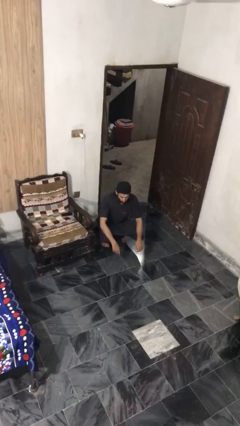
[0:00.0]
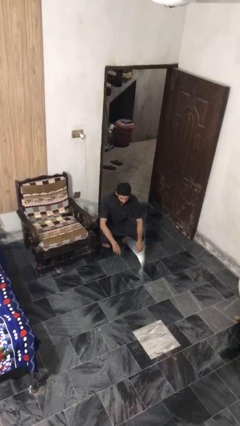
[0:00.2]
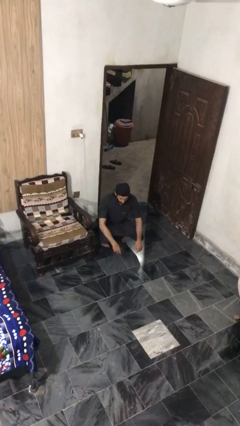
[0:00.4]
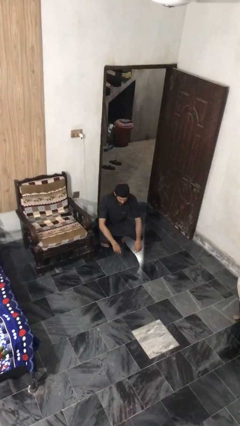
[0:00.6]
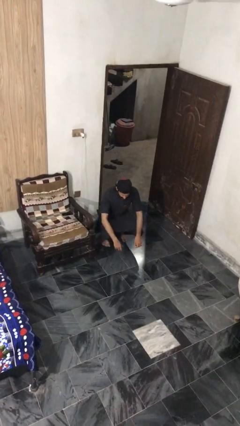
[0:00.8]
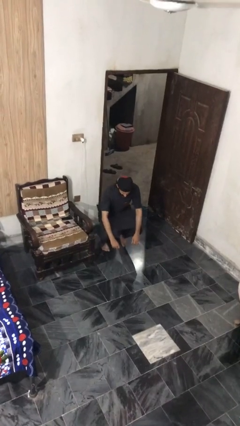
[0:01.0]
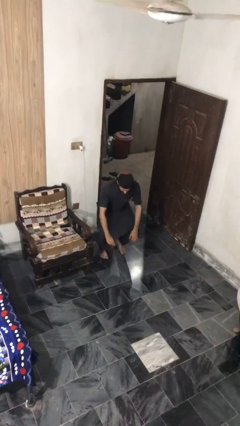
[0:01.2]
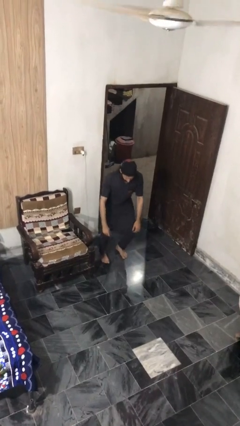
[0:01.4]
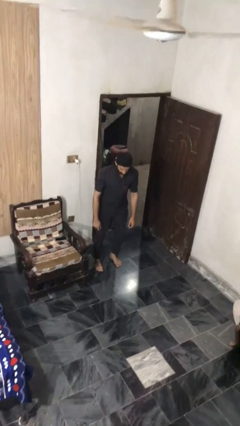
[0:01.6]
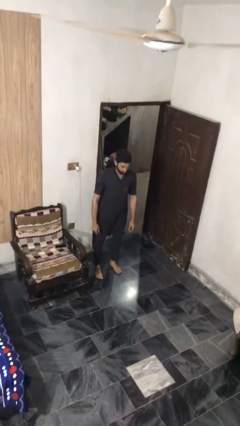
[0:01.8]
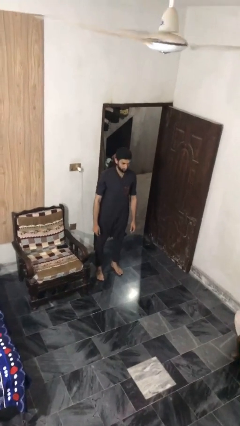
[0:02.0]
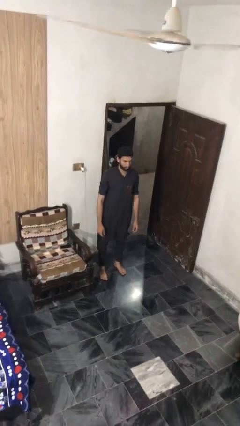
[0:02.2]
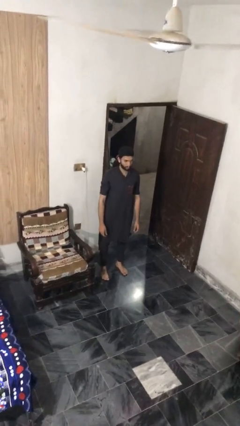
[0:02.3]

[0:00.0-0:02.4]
person stands up

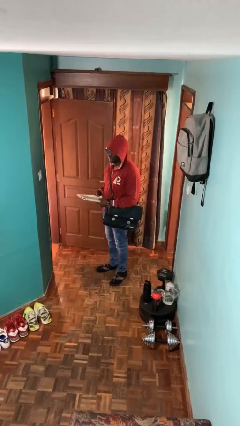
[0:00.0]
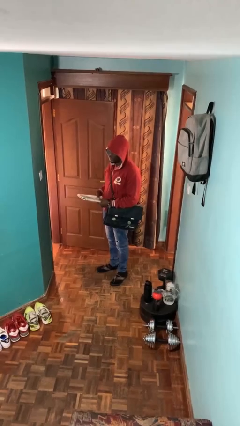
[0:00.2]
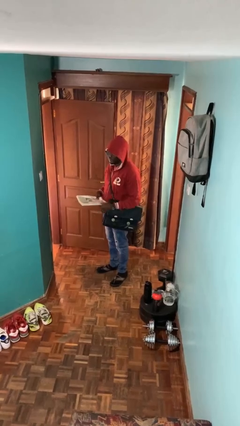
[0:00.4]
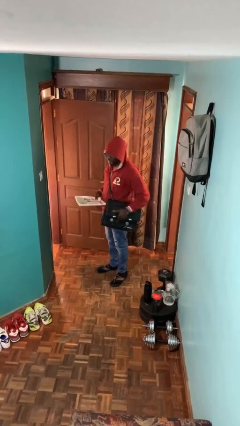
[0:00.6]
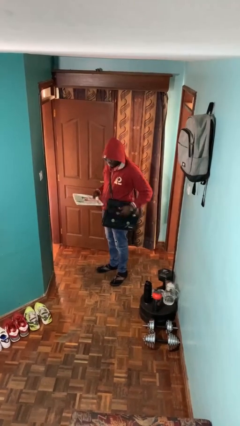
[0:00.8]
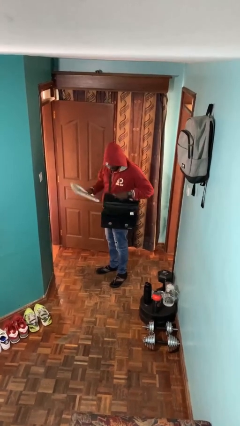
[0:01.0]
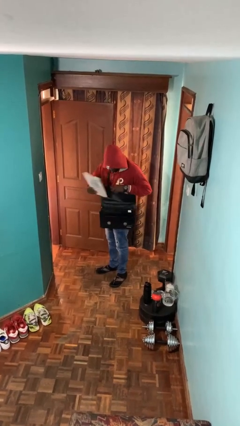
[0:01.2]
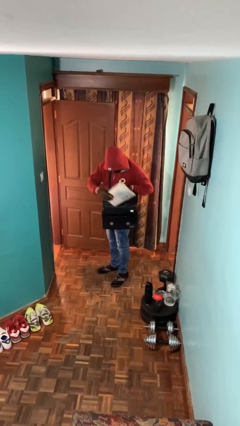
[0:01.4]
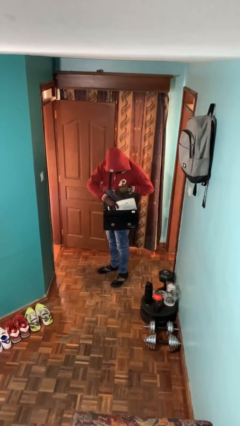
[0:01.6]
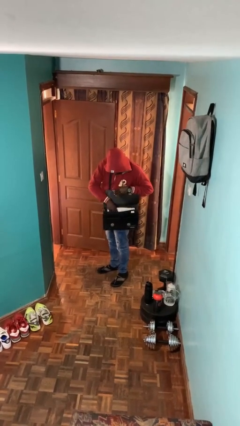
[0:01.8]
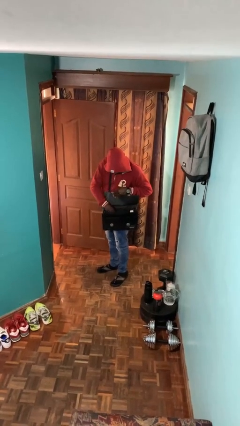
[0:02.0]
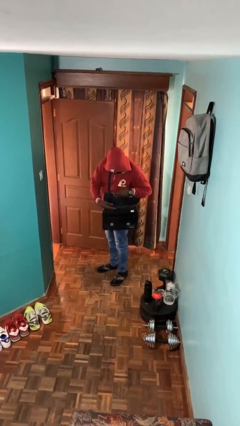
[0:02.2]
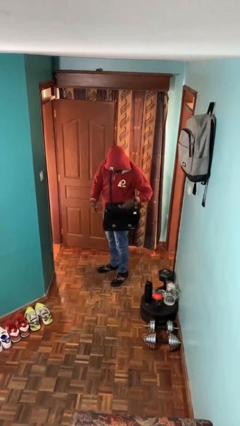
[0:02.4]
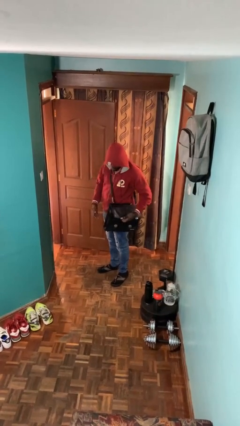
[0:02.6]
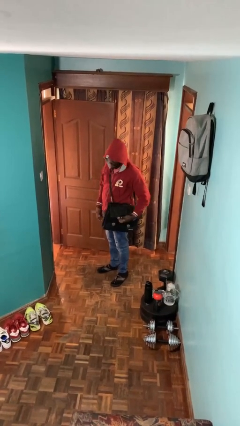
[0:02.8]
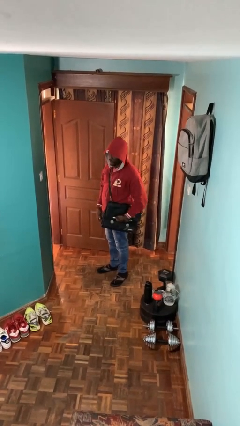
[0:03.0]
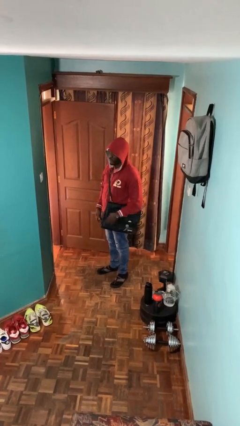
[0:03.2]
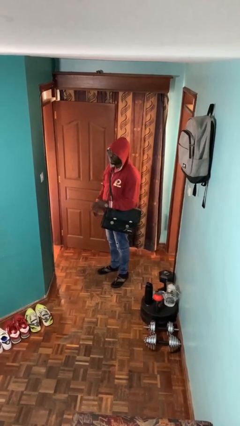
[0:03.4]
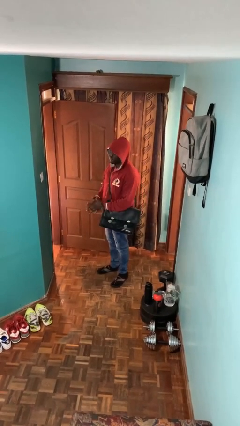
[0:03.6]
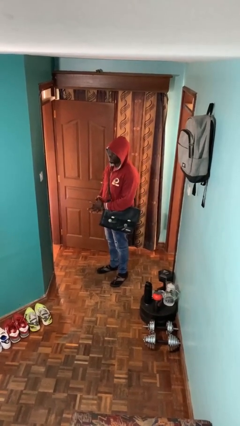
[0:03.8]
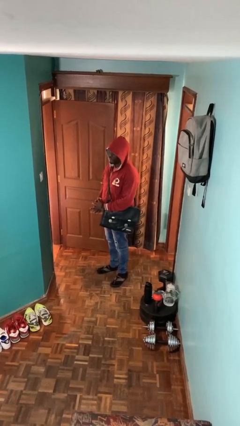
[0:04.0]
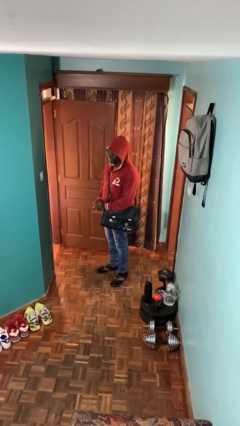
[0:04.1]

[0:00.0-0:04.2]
person puts object into purse

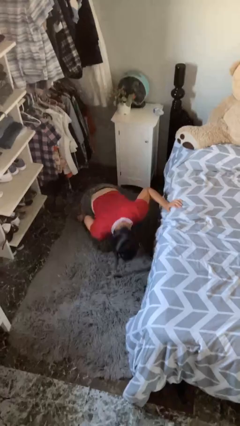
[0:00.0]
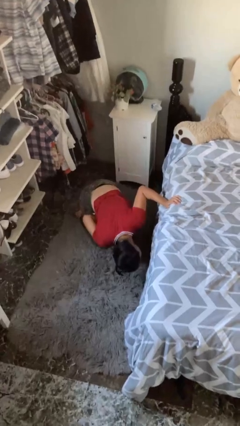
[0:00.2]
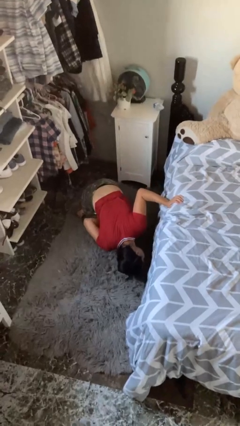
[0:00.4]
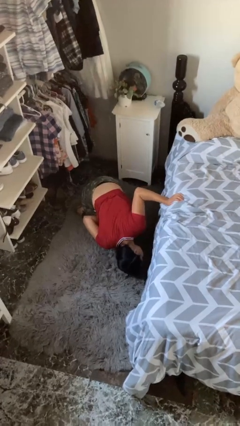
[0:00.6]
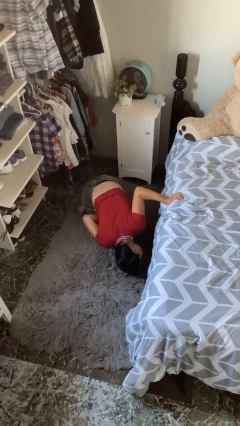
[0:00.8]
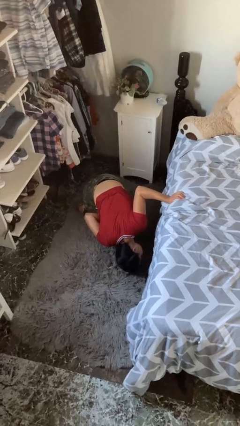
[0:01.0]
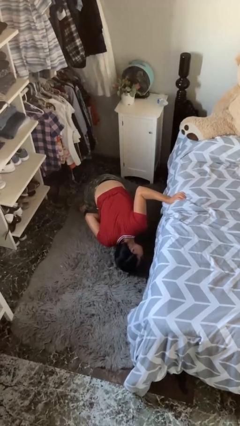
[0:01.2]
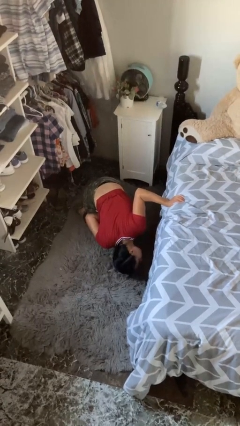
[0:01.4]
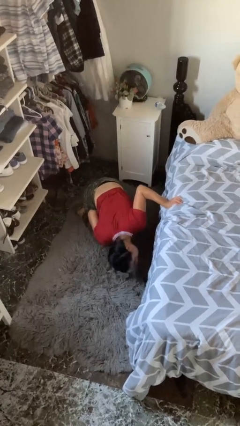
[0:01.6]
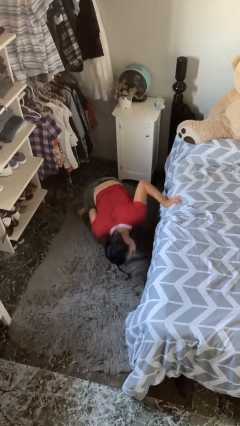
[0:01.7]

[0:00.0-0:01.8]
person searches under bed

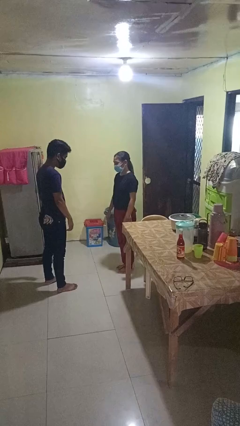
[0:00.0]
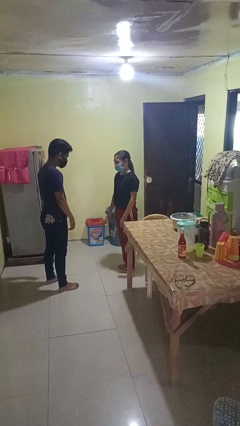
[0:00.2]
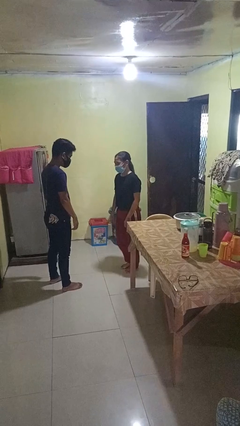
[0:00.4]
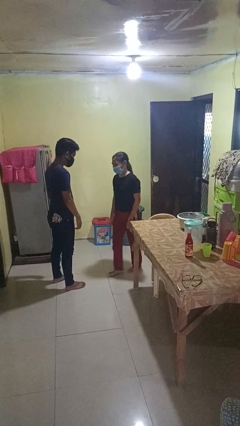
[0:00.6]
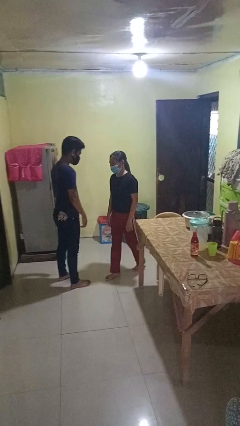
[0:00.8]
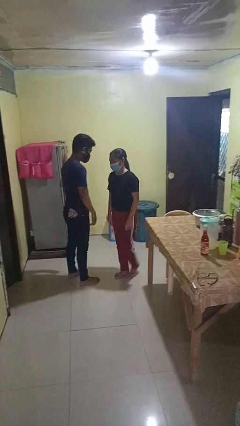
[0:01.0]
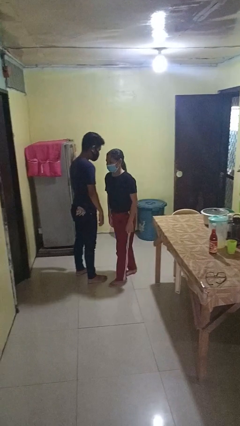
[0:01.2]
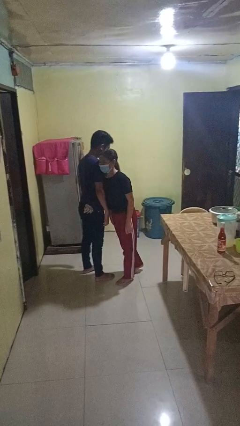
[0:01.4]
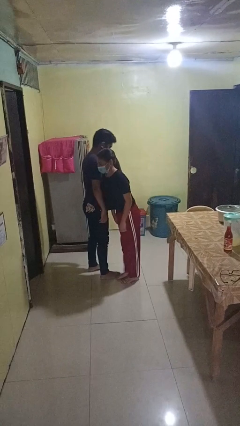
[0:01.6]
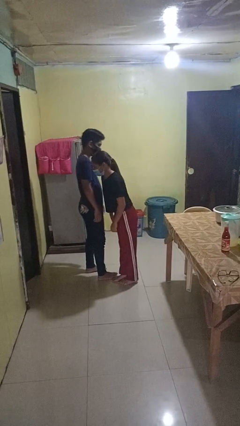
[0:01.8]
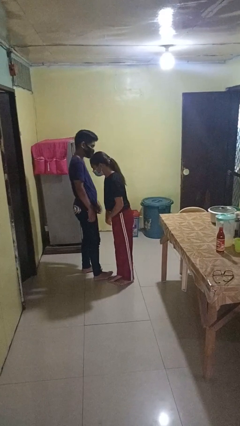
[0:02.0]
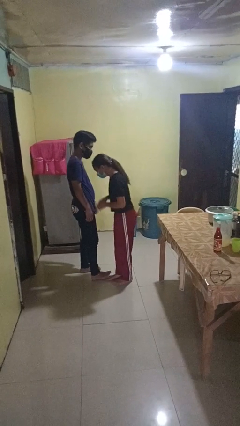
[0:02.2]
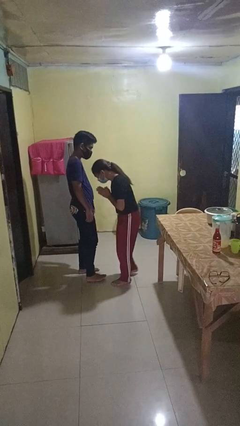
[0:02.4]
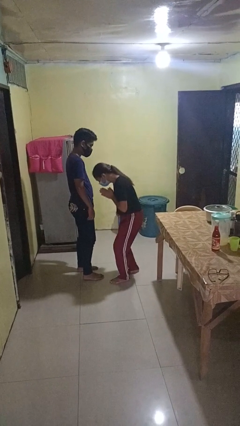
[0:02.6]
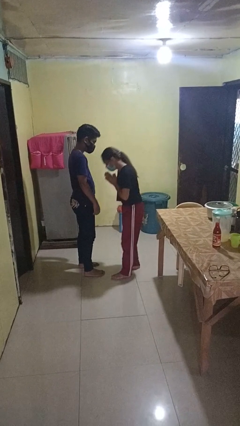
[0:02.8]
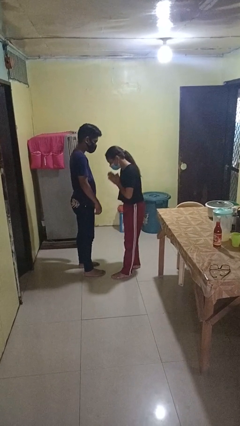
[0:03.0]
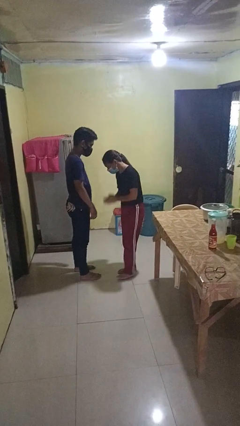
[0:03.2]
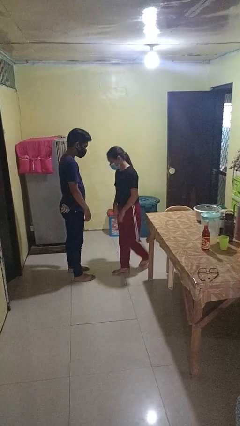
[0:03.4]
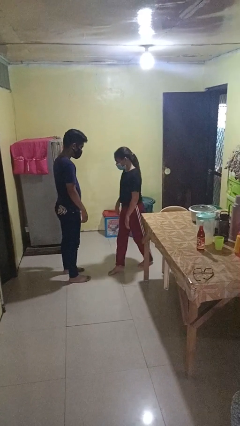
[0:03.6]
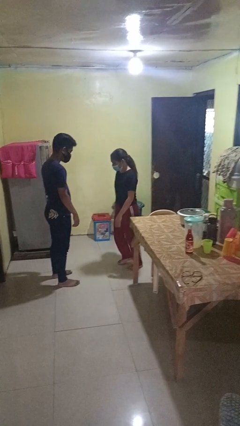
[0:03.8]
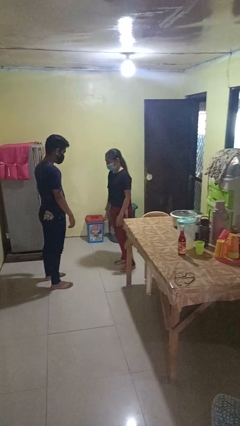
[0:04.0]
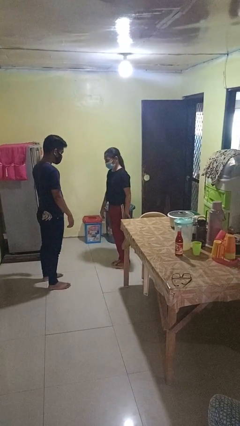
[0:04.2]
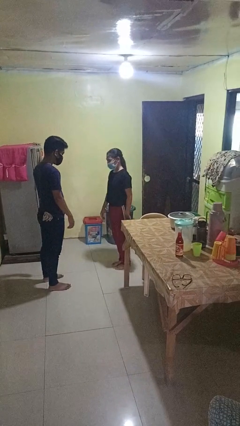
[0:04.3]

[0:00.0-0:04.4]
person bumps into person

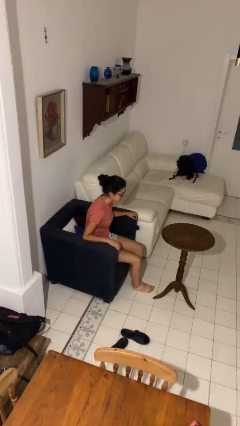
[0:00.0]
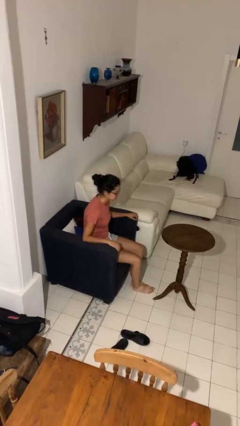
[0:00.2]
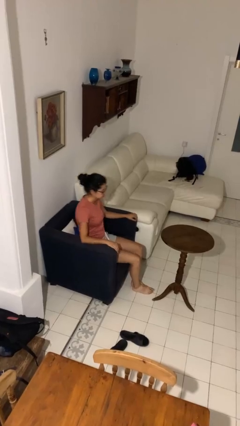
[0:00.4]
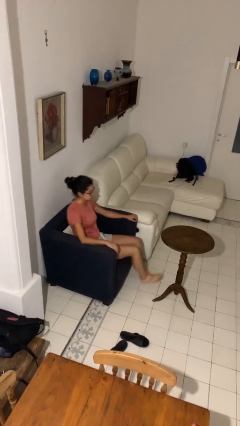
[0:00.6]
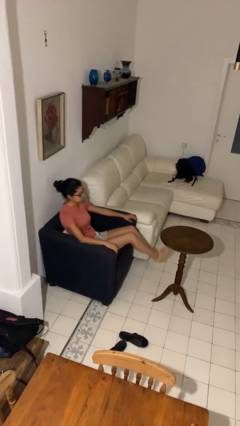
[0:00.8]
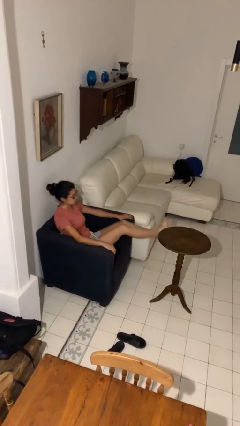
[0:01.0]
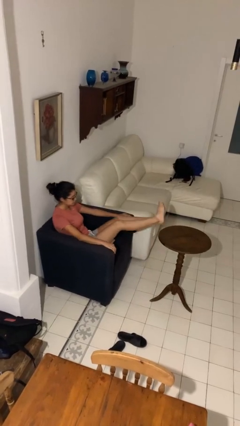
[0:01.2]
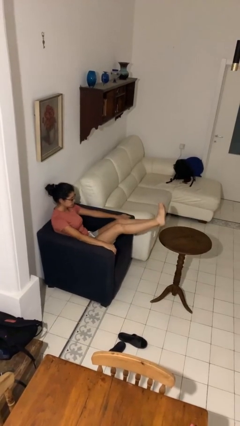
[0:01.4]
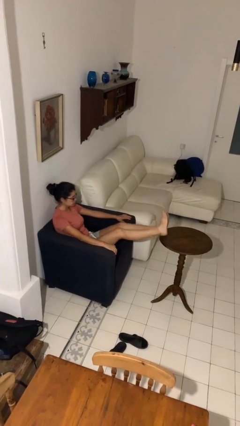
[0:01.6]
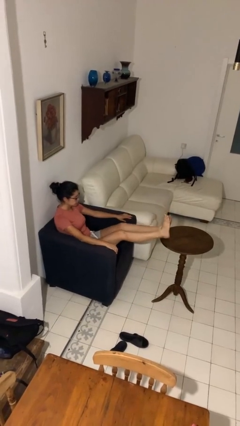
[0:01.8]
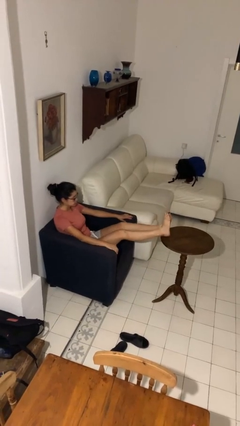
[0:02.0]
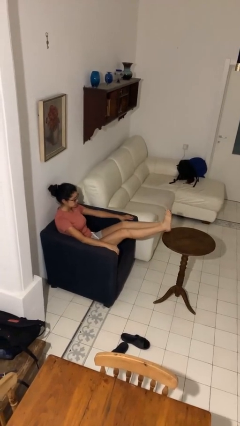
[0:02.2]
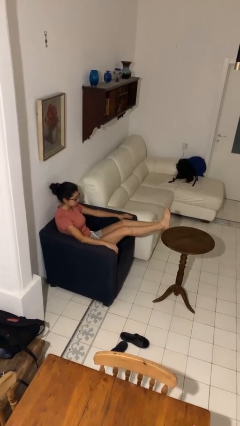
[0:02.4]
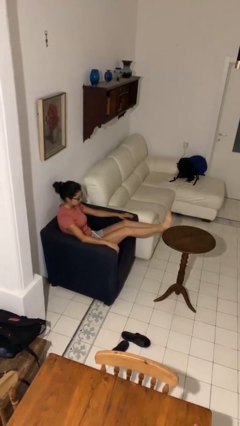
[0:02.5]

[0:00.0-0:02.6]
person puts feet up

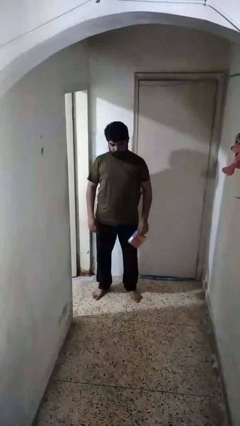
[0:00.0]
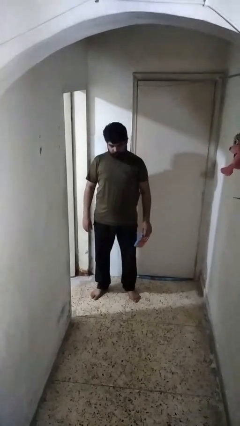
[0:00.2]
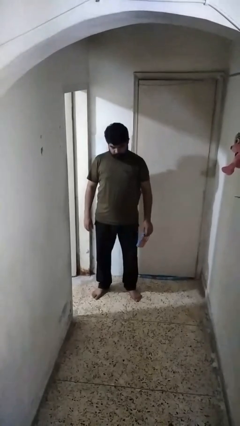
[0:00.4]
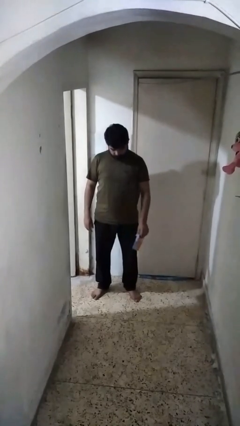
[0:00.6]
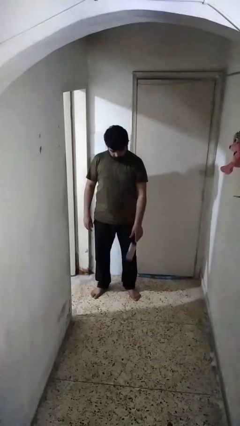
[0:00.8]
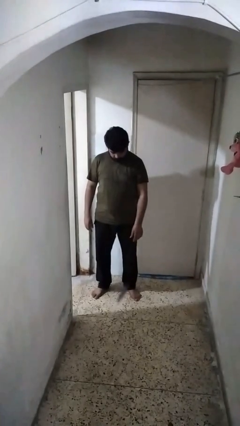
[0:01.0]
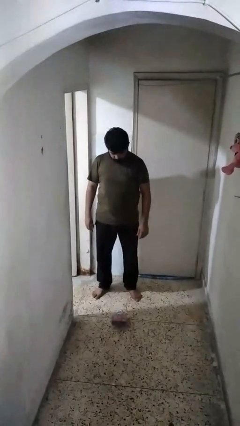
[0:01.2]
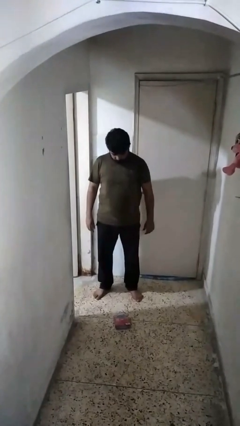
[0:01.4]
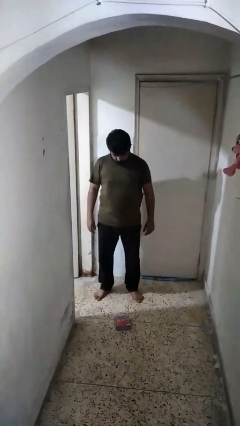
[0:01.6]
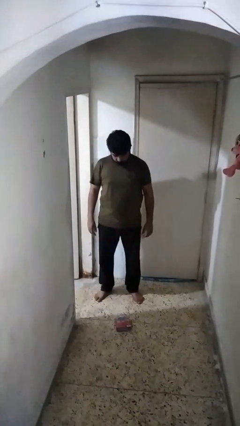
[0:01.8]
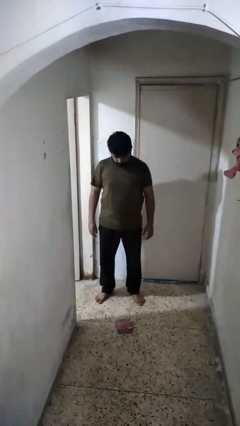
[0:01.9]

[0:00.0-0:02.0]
person throws object to ground
